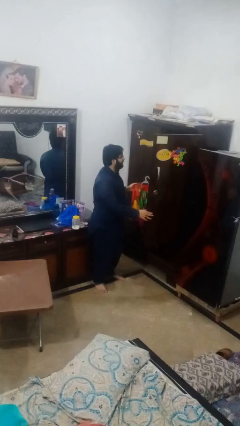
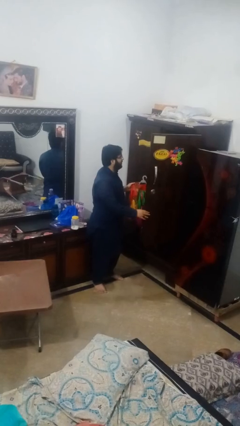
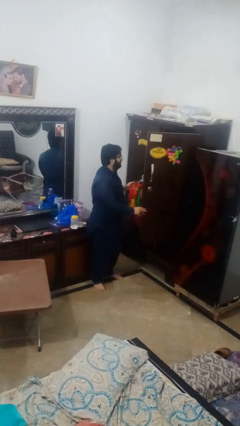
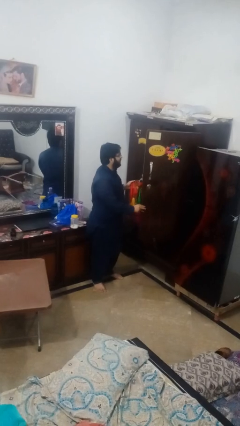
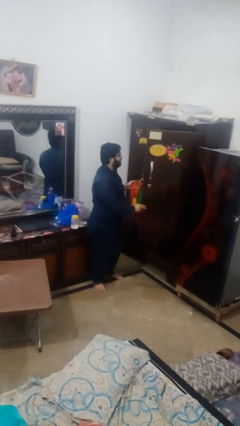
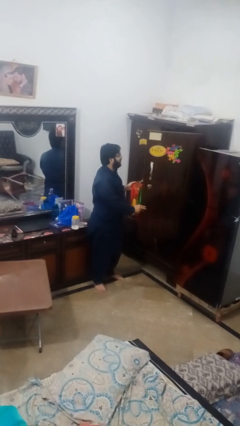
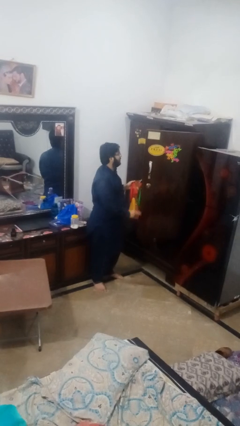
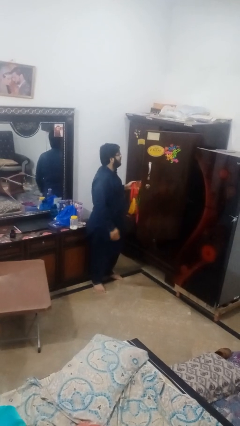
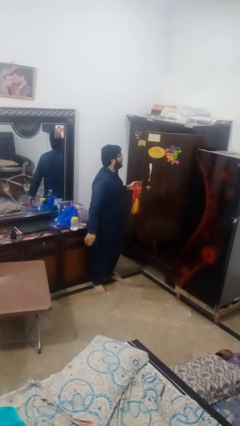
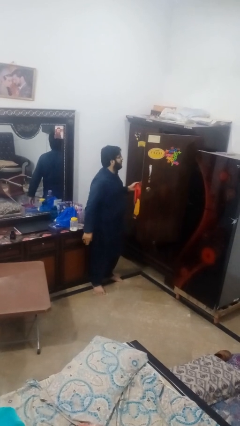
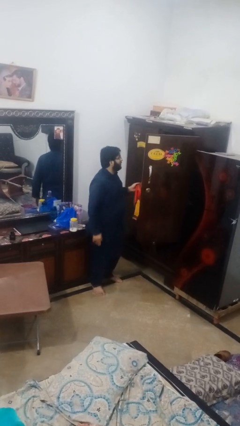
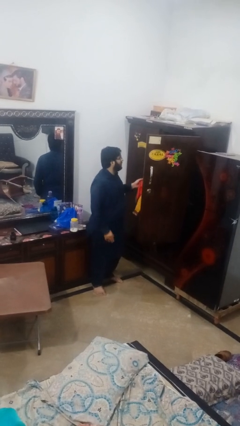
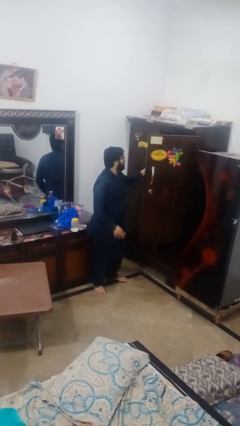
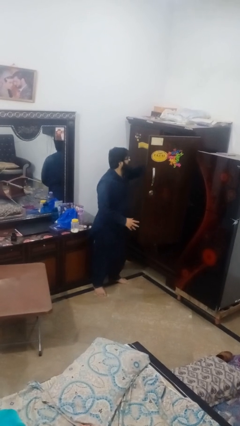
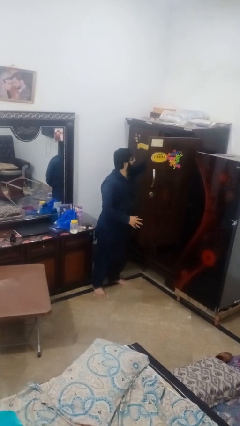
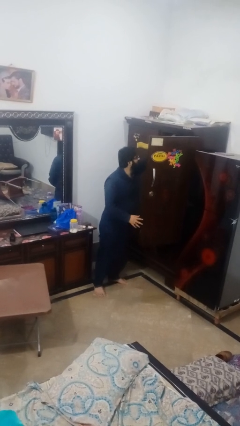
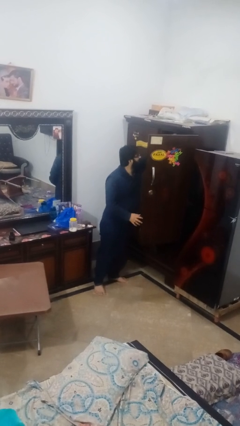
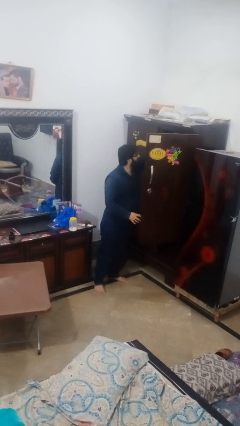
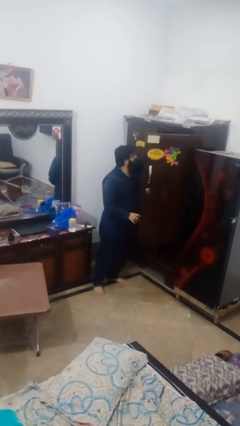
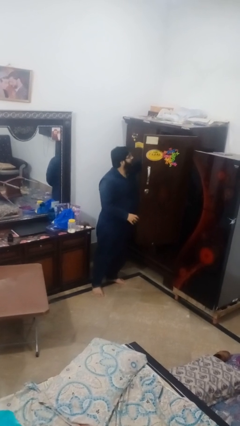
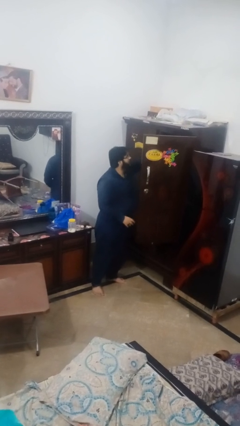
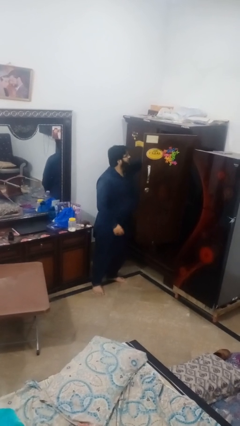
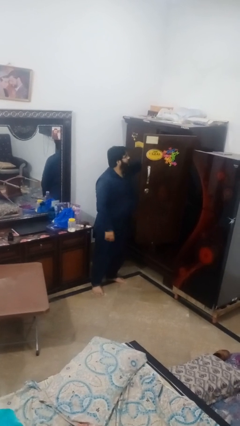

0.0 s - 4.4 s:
person puts clothes into closet

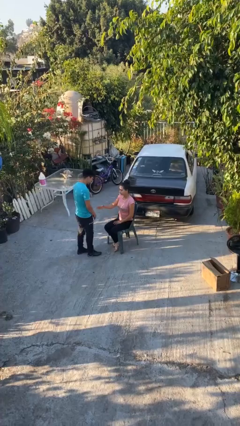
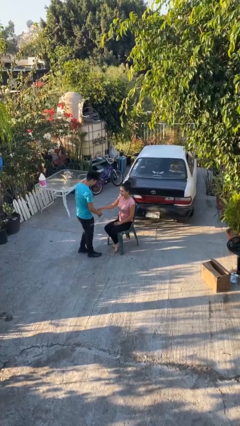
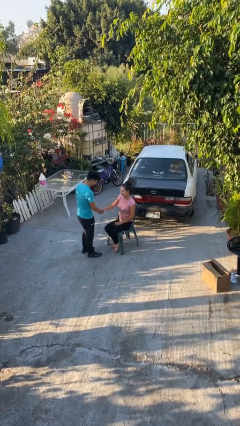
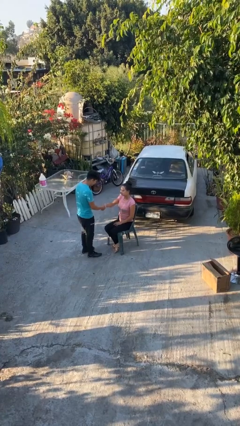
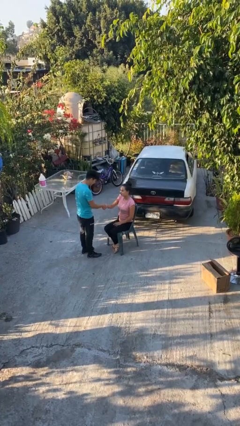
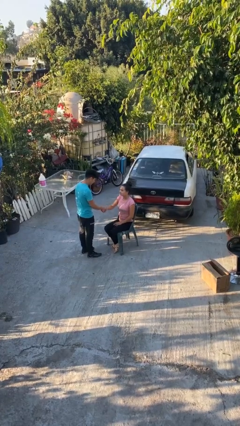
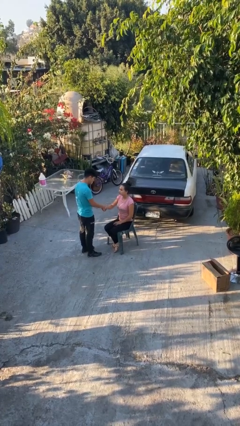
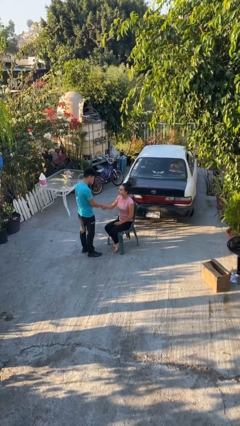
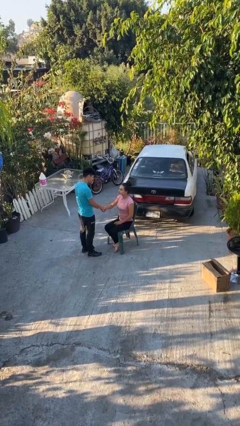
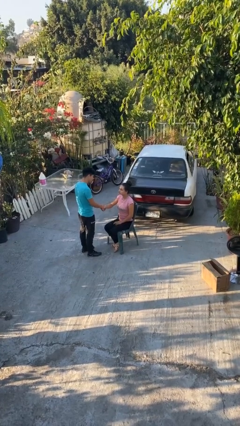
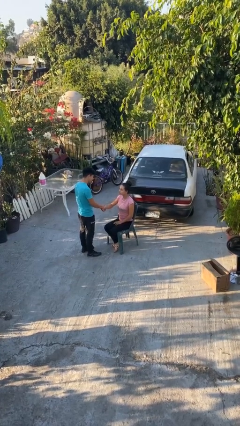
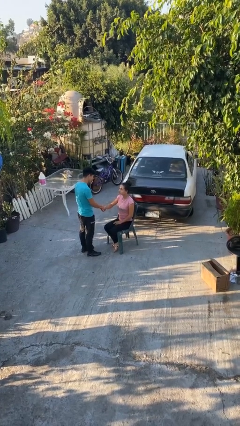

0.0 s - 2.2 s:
person shakes hand

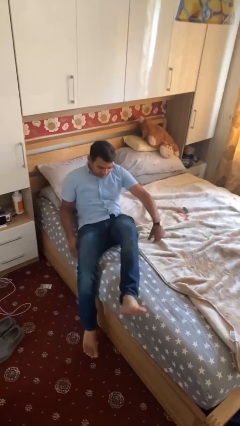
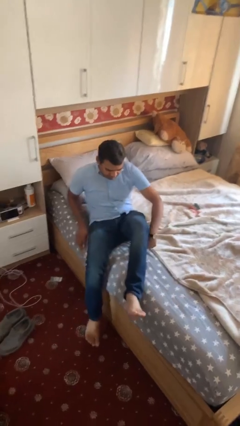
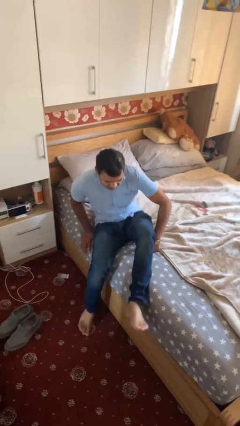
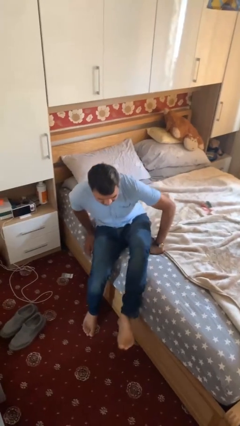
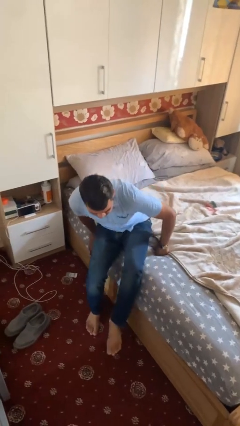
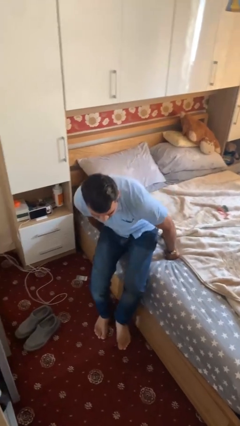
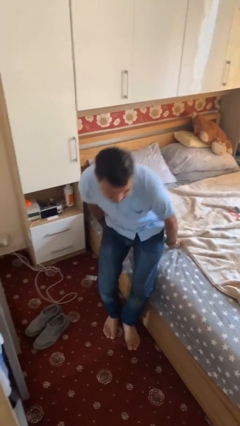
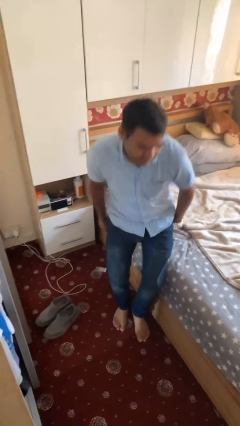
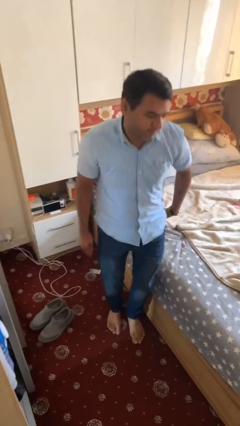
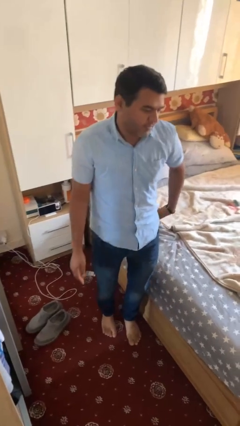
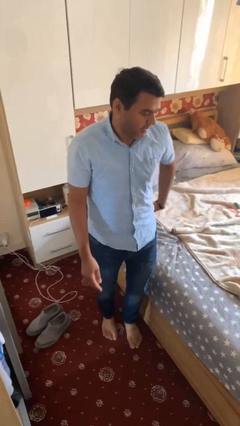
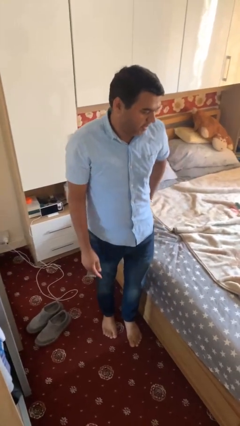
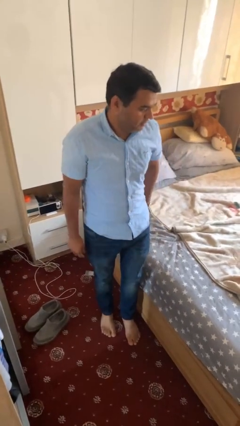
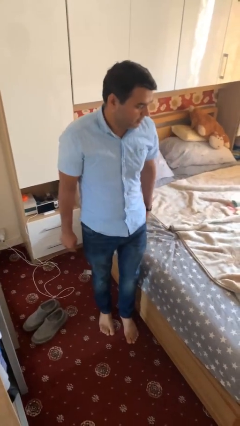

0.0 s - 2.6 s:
person stands up

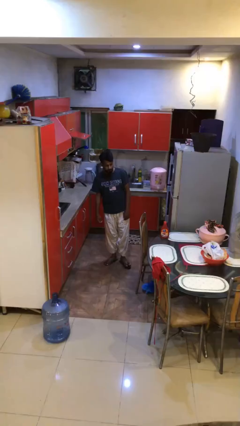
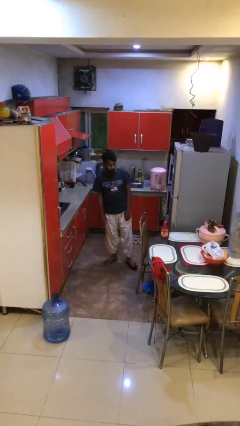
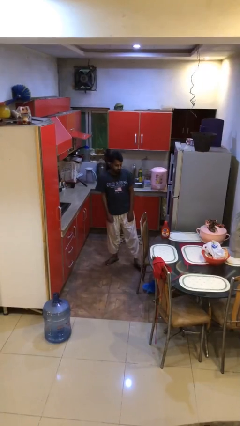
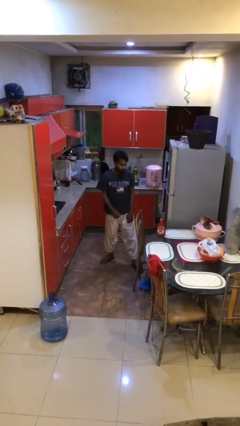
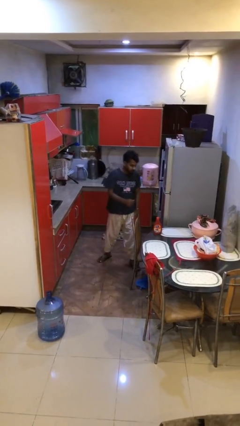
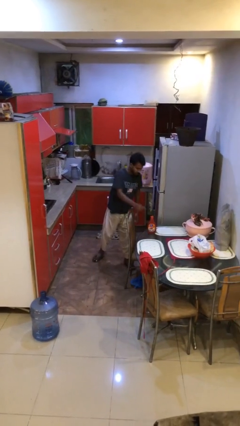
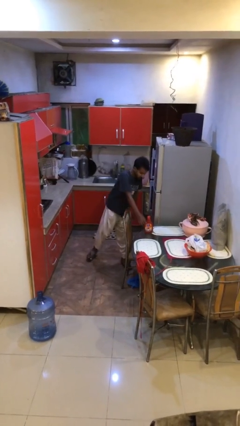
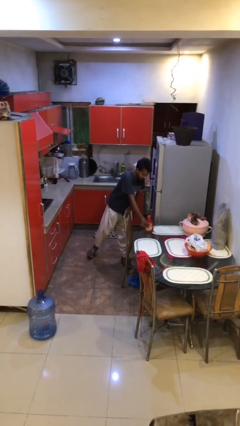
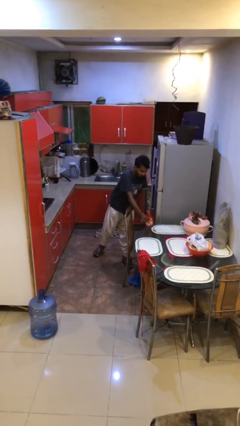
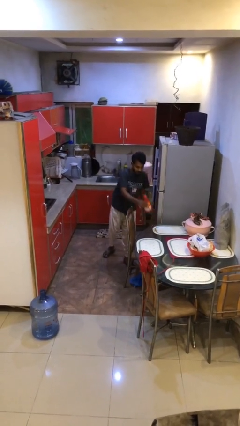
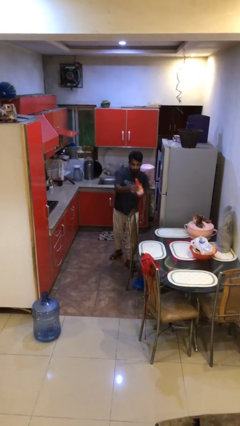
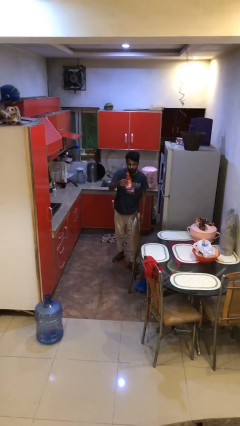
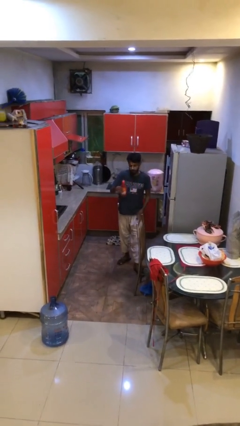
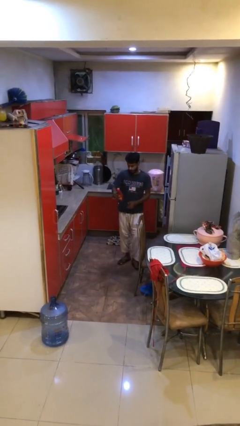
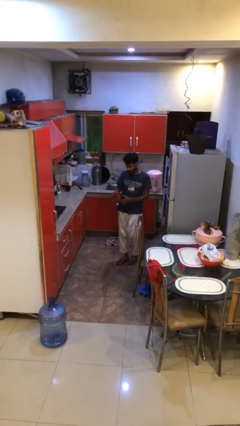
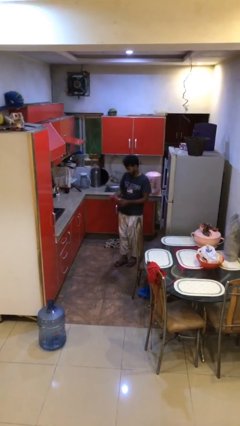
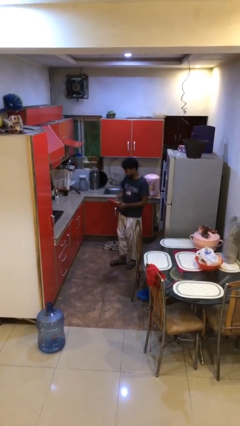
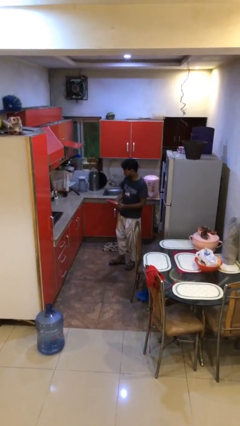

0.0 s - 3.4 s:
person picks up object from table

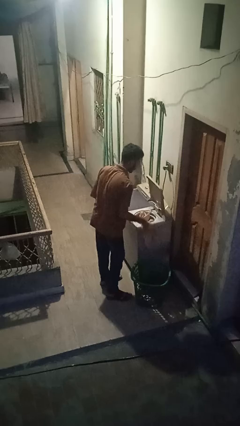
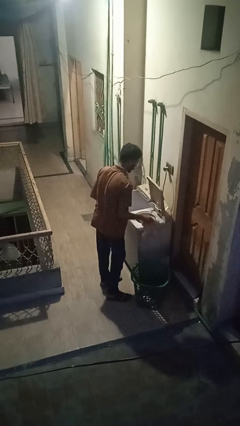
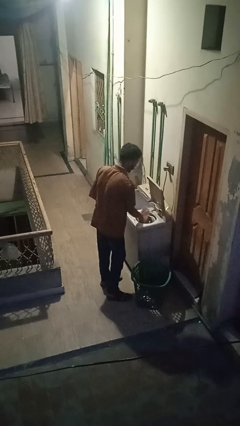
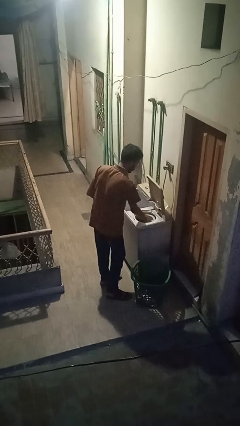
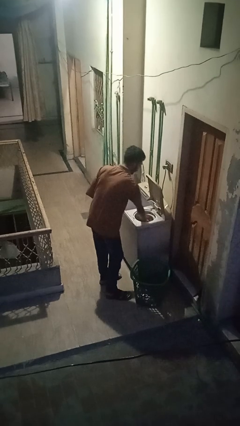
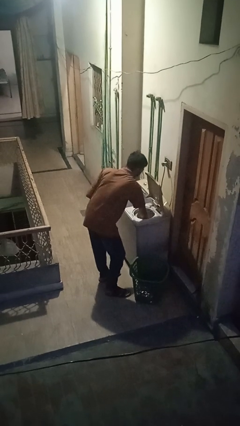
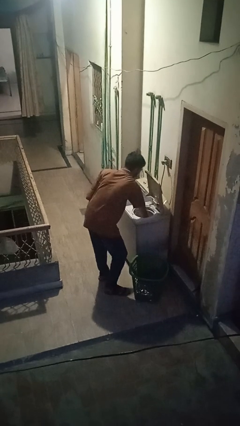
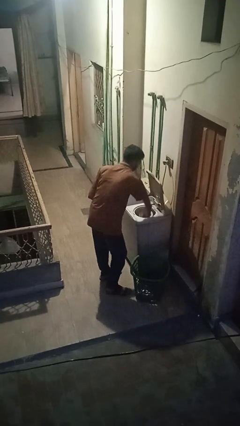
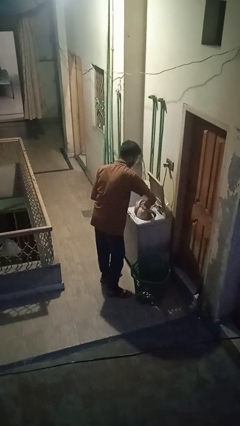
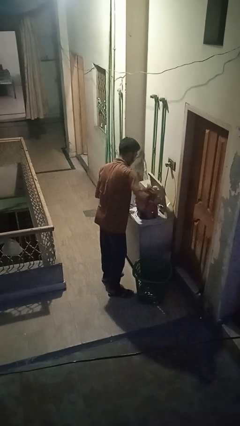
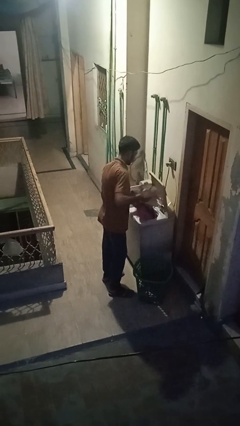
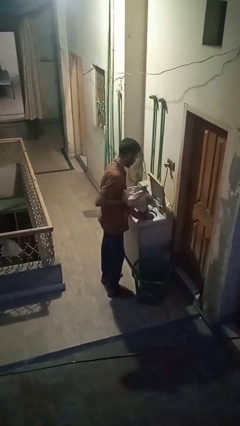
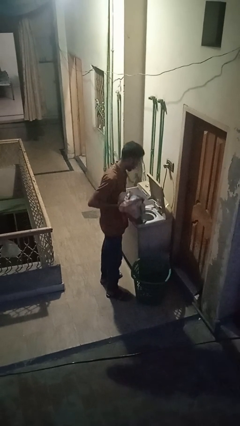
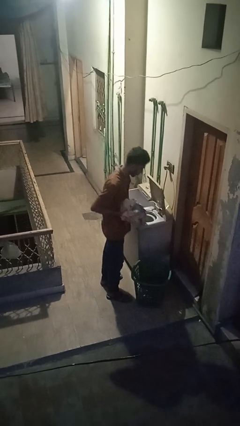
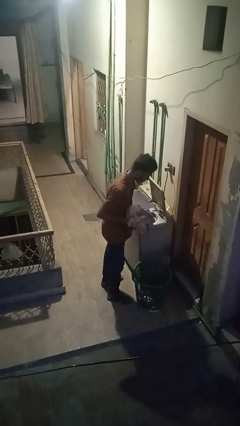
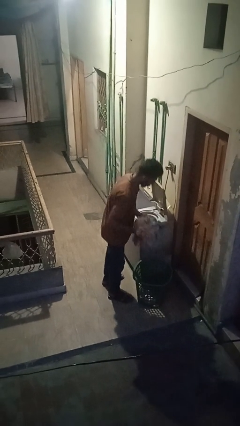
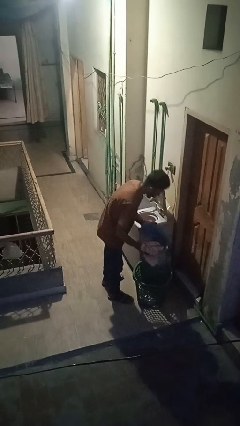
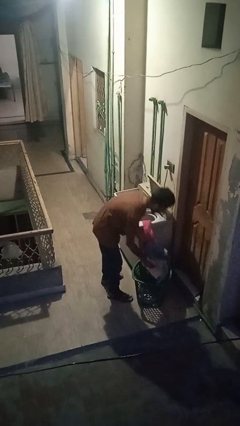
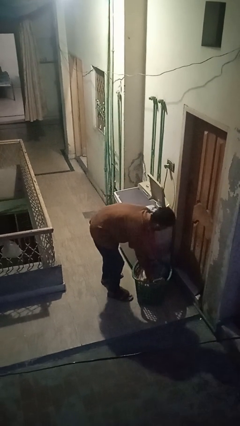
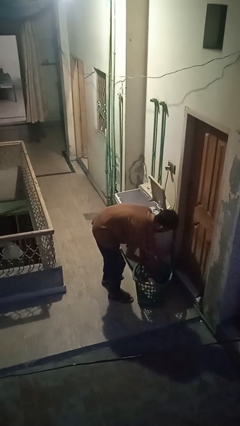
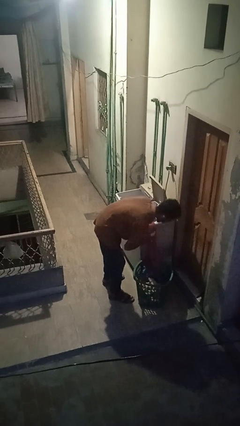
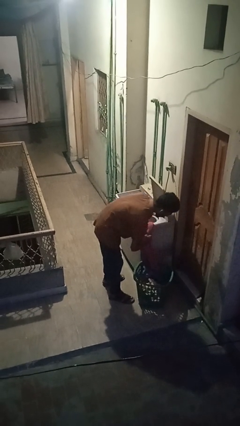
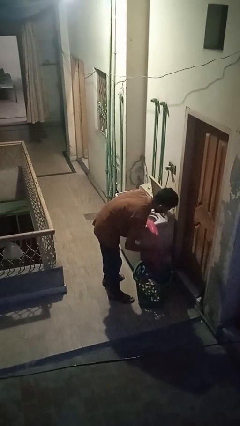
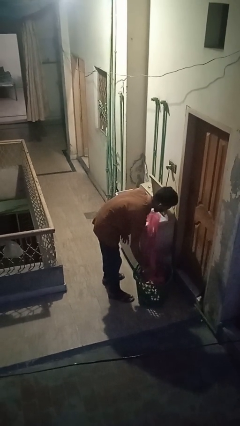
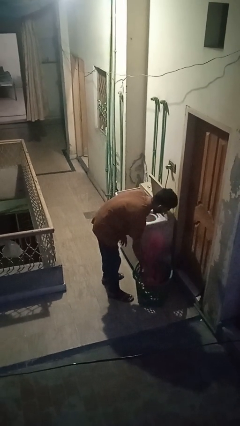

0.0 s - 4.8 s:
person unloads dryer

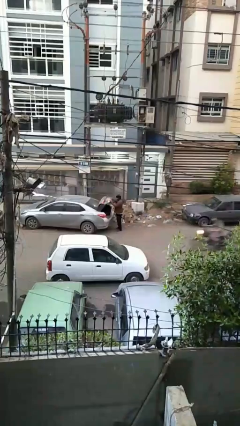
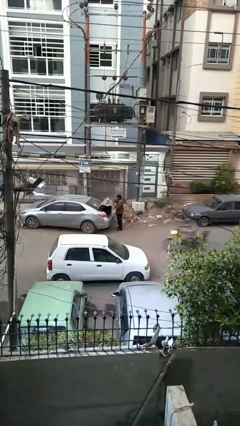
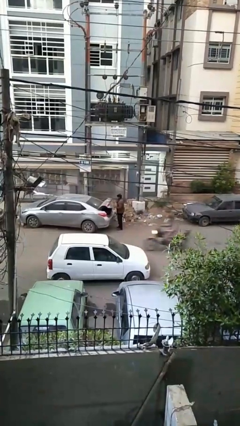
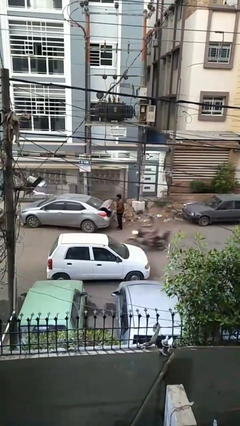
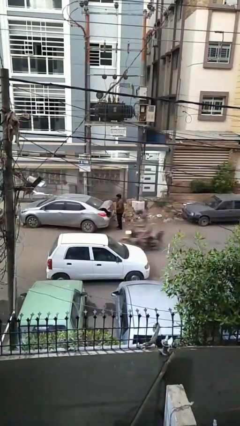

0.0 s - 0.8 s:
person closes car trunk
